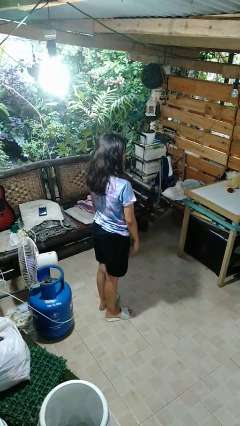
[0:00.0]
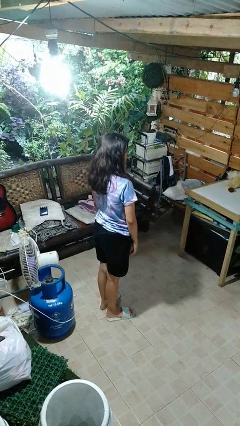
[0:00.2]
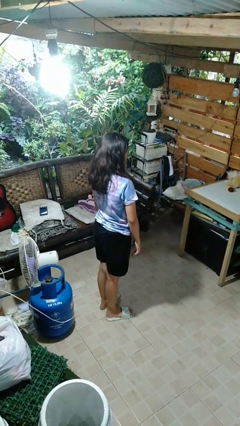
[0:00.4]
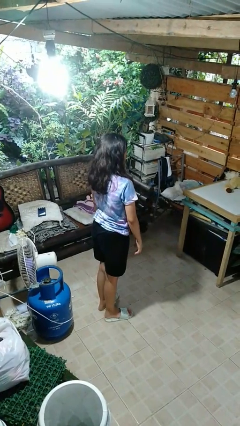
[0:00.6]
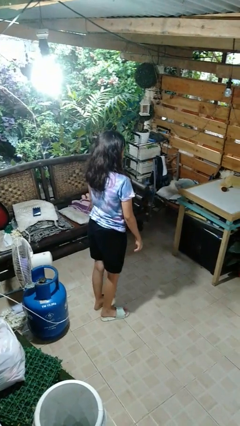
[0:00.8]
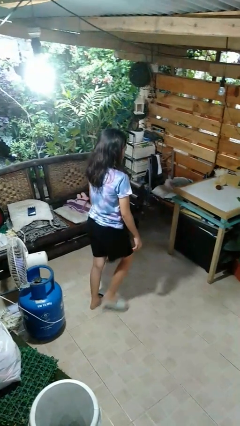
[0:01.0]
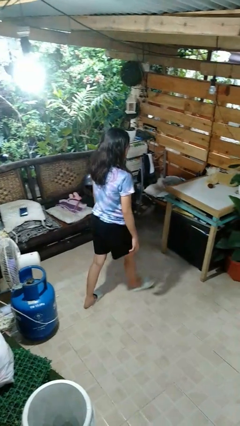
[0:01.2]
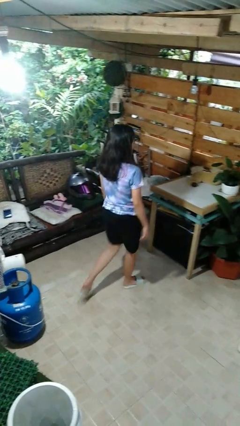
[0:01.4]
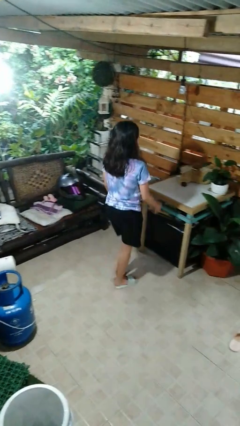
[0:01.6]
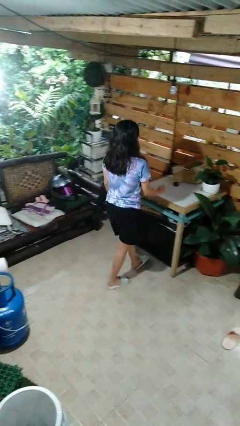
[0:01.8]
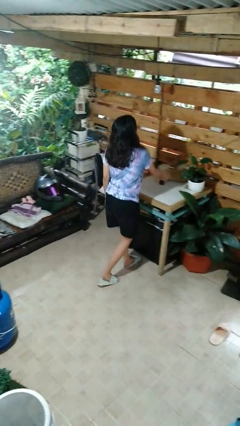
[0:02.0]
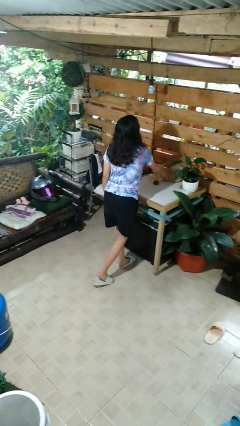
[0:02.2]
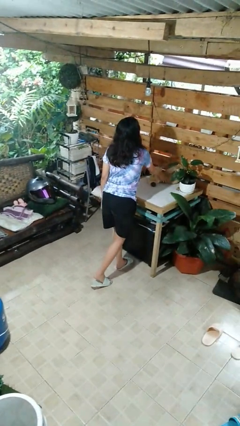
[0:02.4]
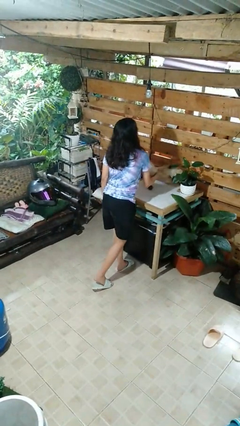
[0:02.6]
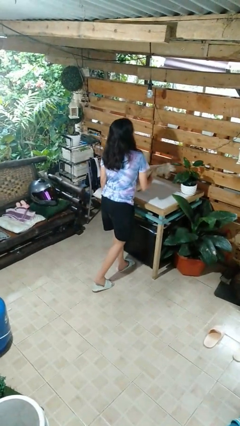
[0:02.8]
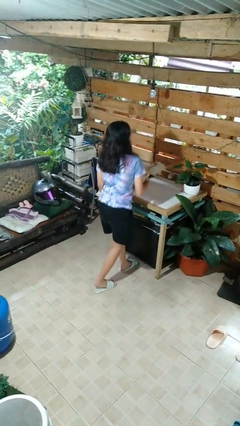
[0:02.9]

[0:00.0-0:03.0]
person picks up object from table

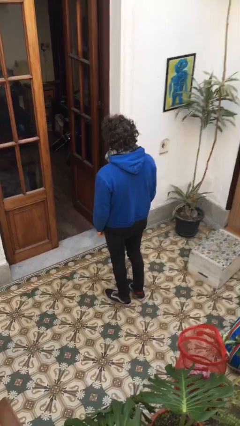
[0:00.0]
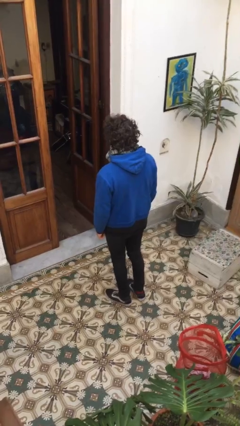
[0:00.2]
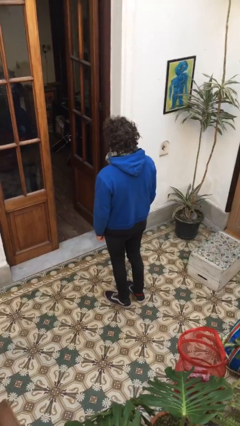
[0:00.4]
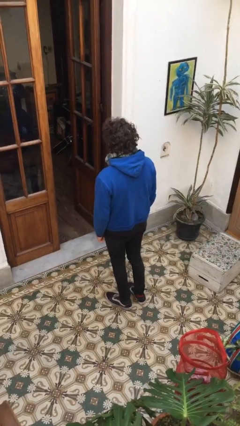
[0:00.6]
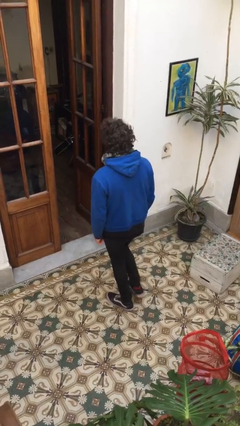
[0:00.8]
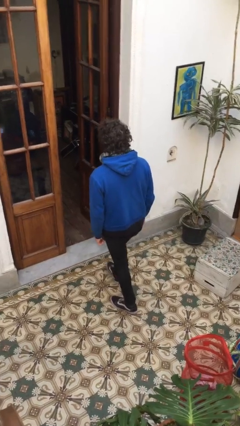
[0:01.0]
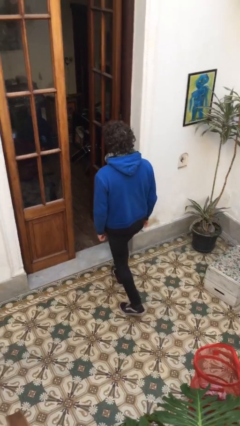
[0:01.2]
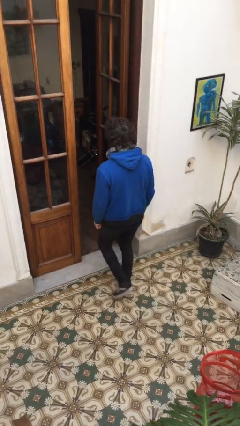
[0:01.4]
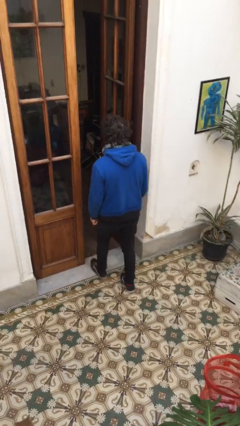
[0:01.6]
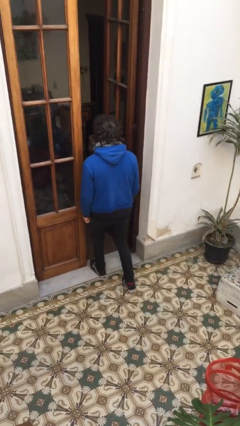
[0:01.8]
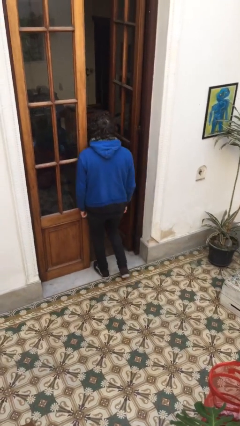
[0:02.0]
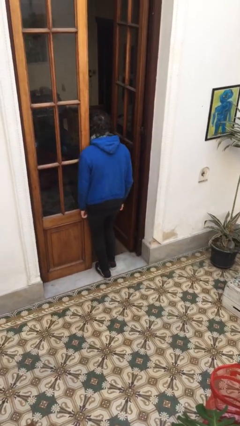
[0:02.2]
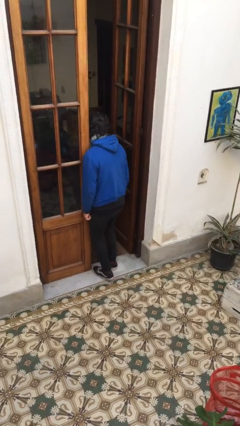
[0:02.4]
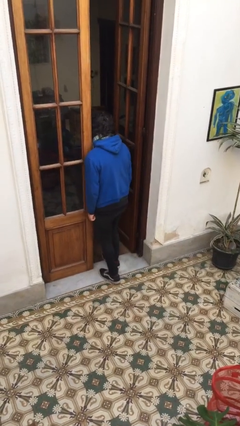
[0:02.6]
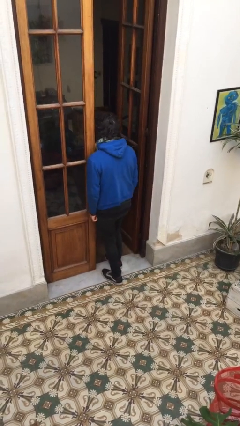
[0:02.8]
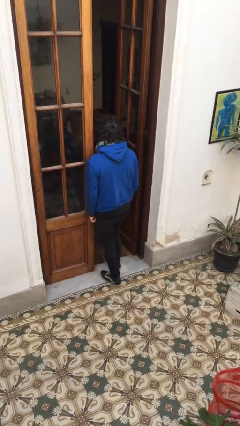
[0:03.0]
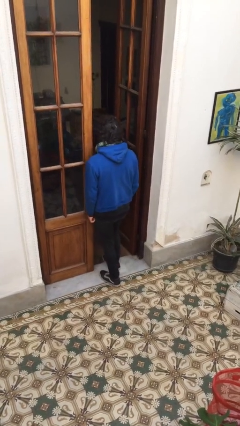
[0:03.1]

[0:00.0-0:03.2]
person bumps into wall

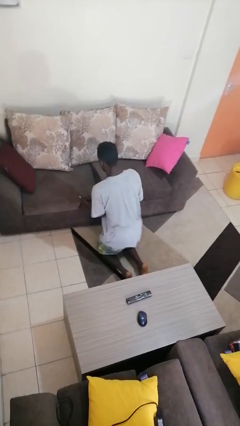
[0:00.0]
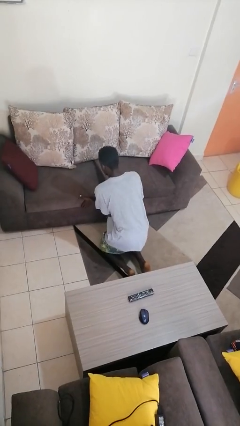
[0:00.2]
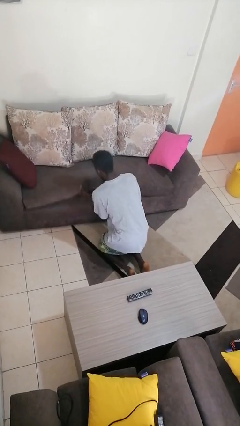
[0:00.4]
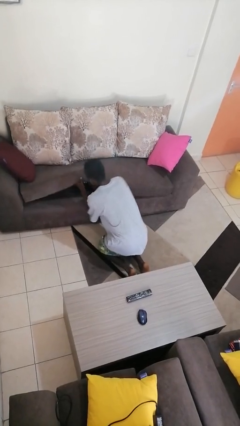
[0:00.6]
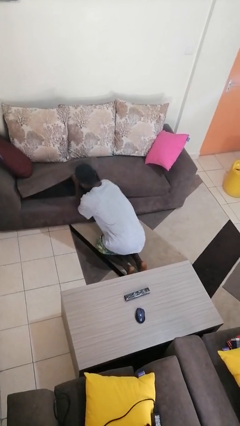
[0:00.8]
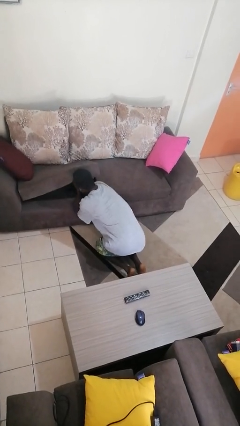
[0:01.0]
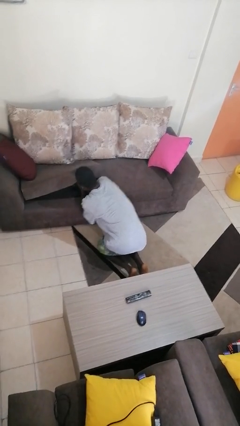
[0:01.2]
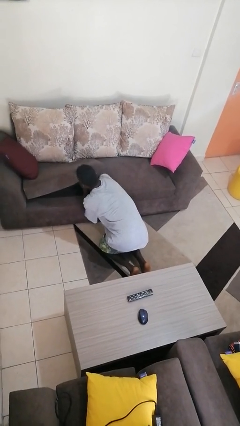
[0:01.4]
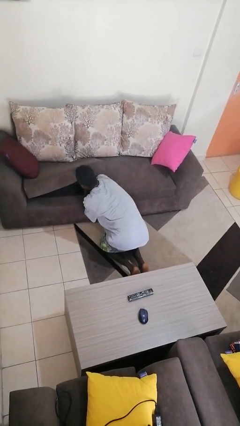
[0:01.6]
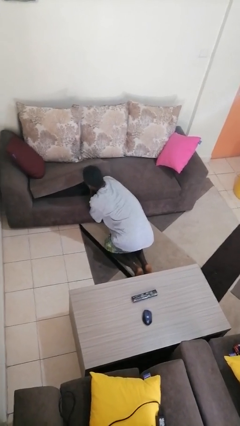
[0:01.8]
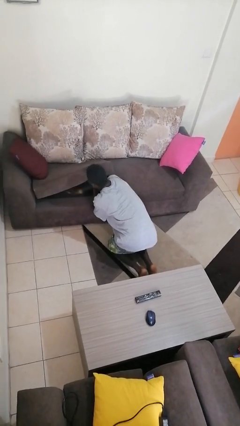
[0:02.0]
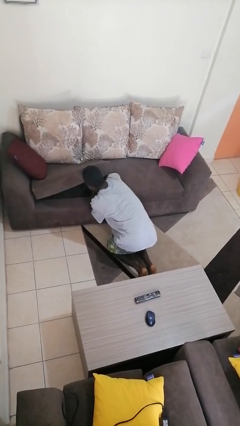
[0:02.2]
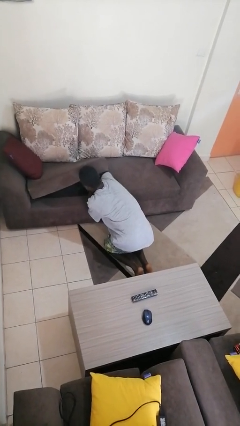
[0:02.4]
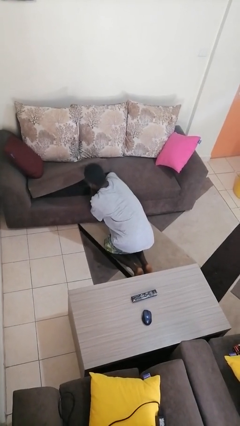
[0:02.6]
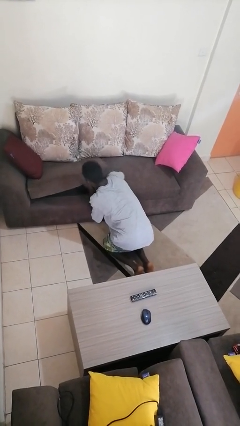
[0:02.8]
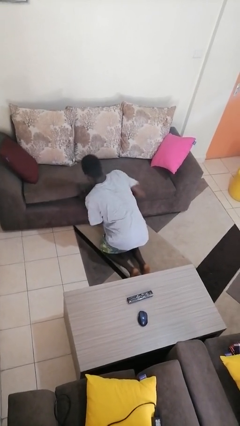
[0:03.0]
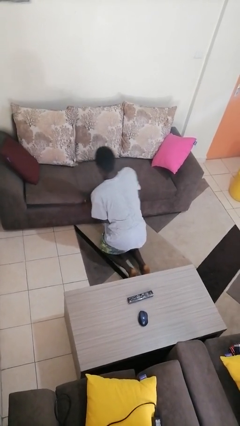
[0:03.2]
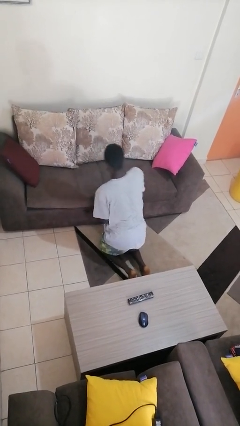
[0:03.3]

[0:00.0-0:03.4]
person searches under couch

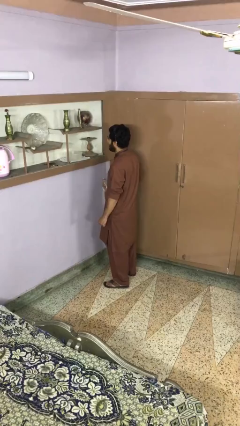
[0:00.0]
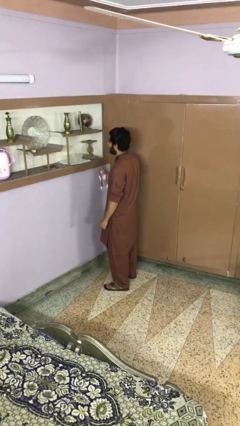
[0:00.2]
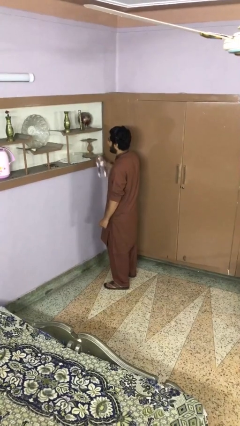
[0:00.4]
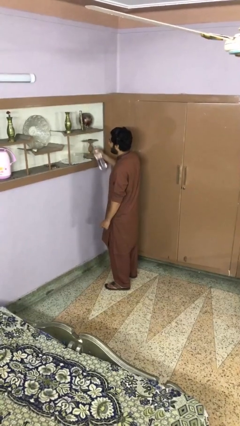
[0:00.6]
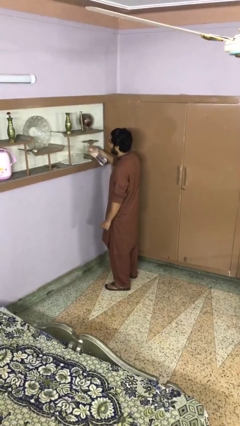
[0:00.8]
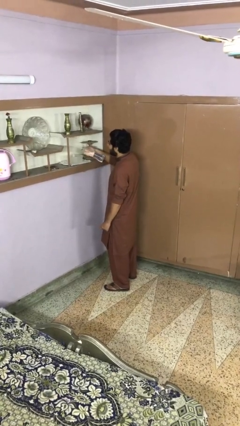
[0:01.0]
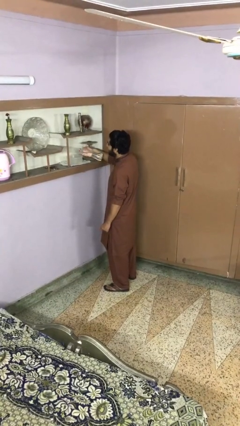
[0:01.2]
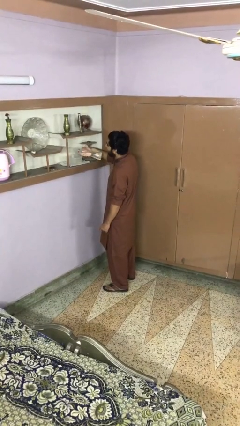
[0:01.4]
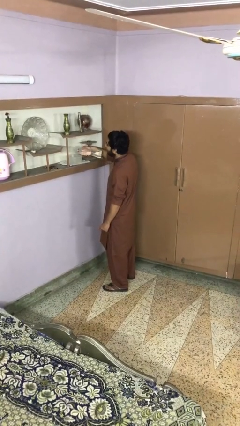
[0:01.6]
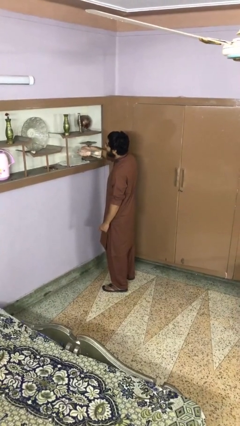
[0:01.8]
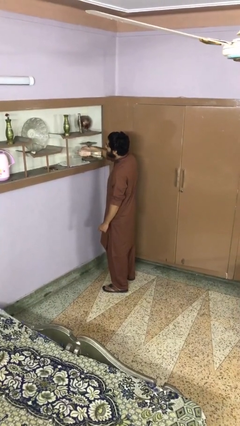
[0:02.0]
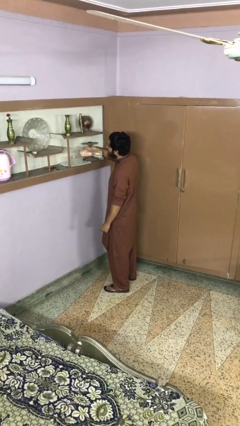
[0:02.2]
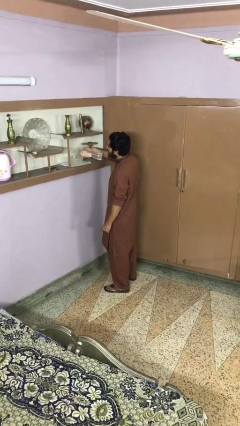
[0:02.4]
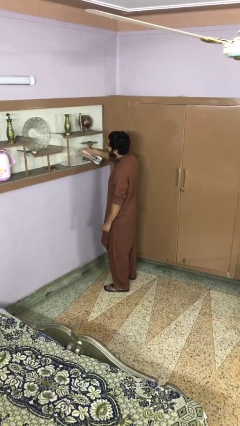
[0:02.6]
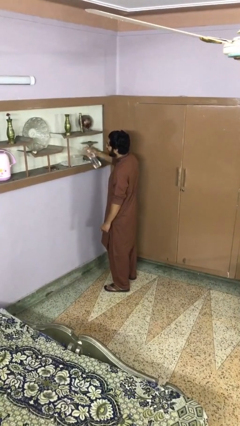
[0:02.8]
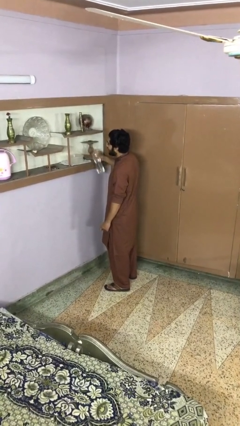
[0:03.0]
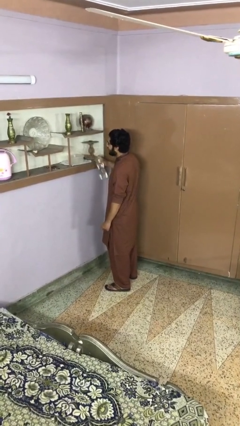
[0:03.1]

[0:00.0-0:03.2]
person pours into bowl

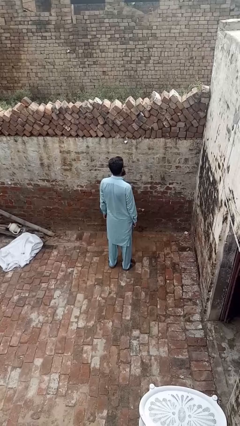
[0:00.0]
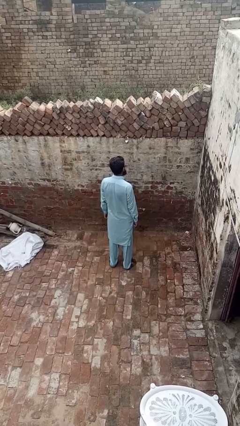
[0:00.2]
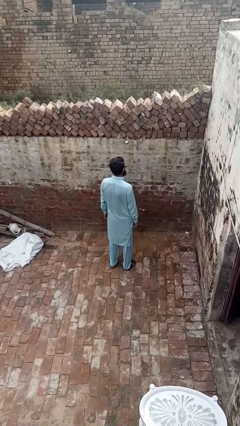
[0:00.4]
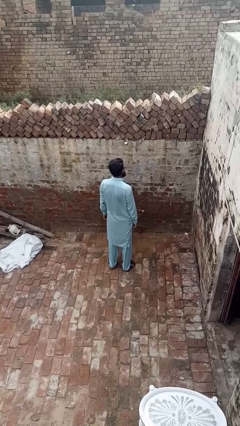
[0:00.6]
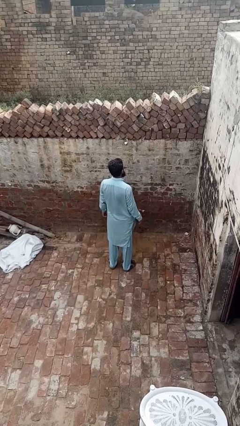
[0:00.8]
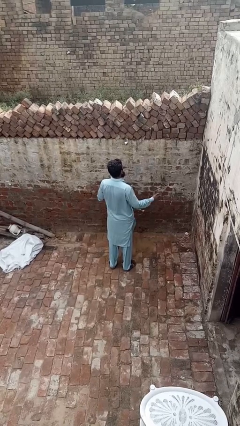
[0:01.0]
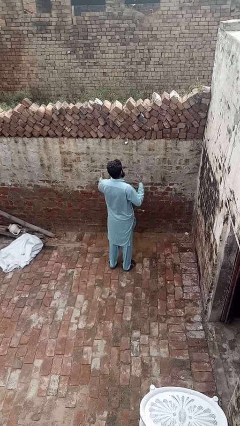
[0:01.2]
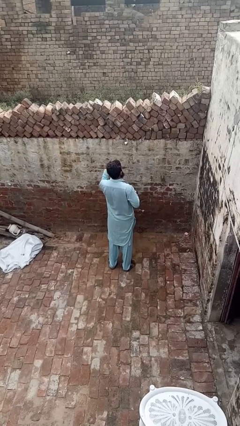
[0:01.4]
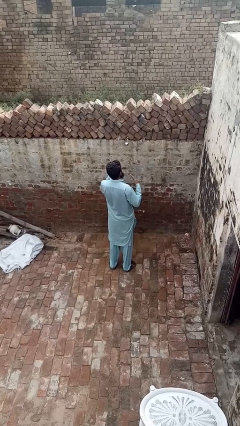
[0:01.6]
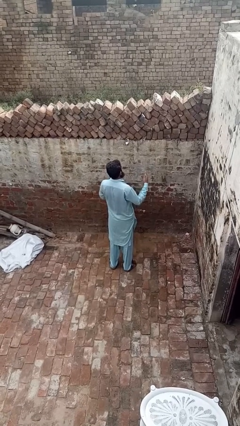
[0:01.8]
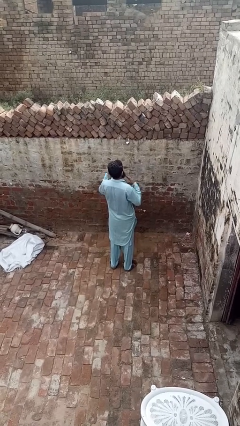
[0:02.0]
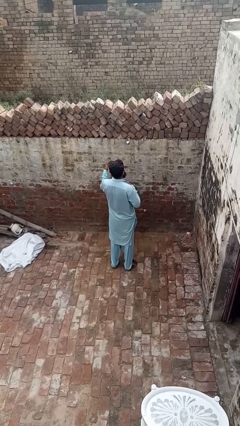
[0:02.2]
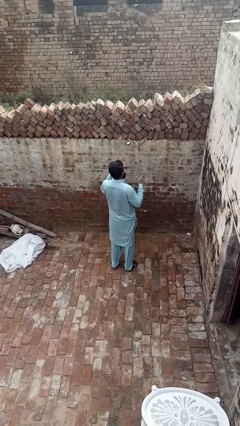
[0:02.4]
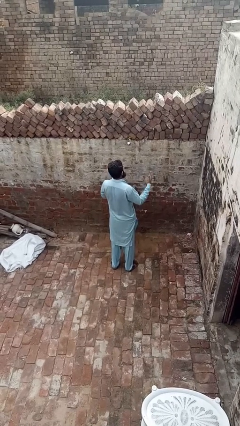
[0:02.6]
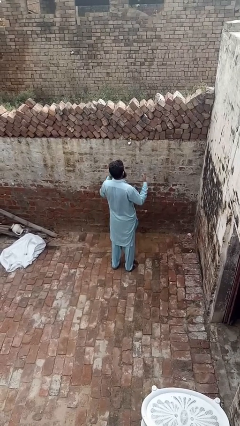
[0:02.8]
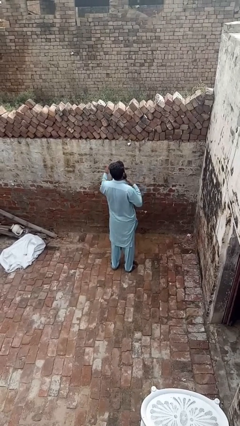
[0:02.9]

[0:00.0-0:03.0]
person drums on chest

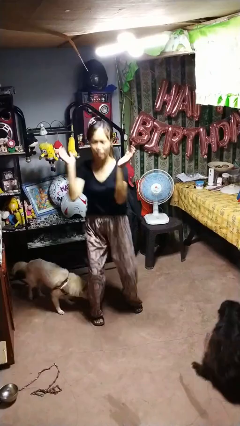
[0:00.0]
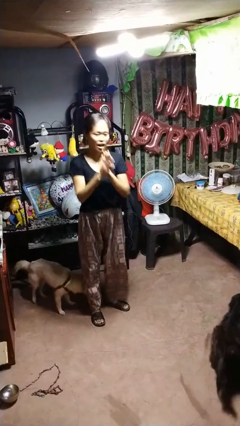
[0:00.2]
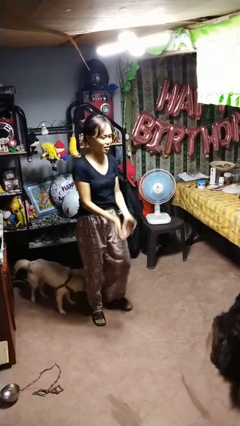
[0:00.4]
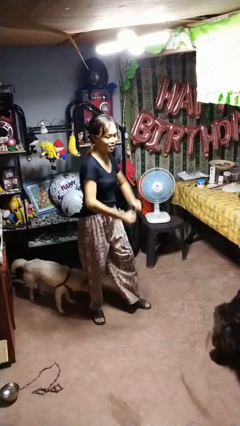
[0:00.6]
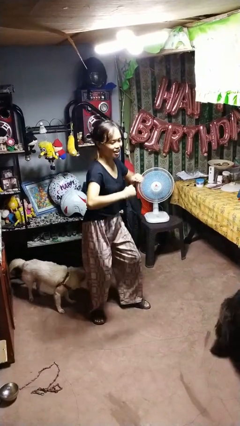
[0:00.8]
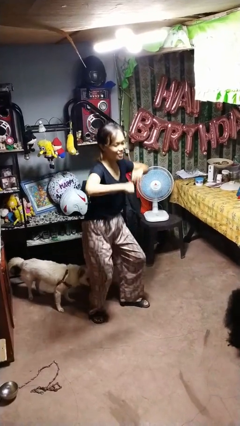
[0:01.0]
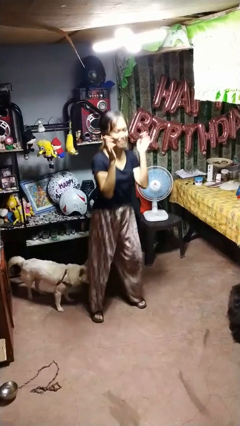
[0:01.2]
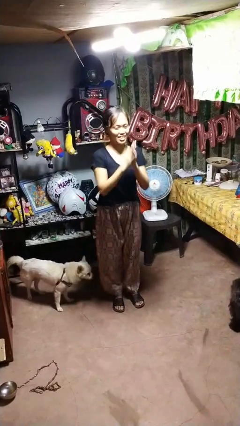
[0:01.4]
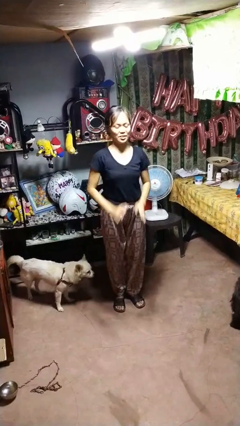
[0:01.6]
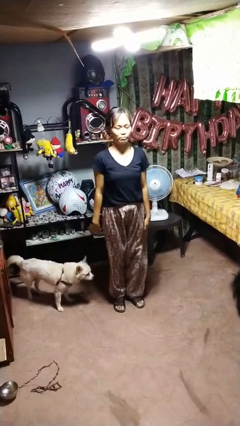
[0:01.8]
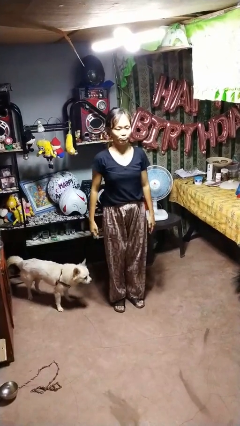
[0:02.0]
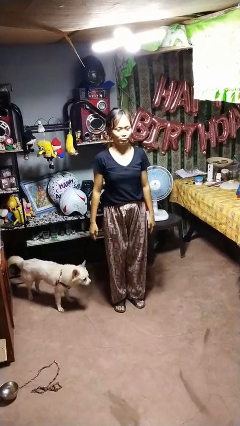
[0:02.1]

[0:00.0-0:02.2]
person dances in place
